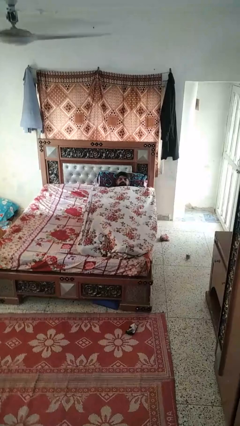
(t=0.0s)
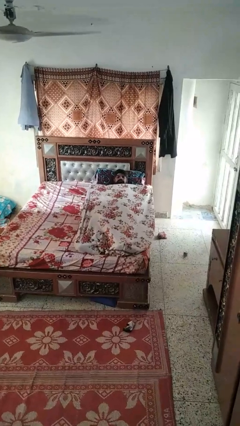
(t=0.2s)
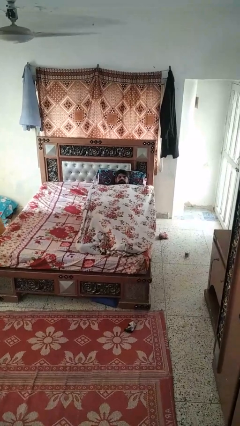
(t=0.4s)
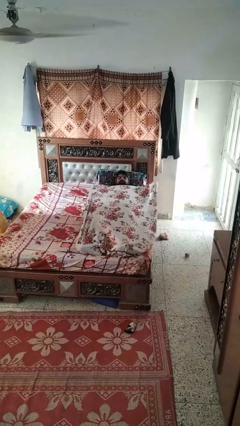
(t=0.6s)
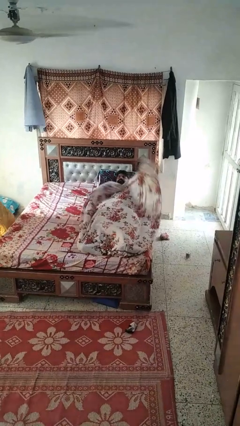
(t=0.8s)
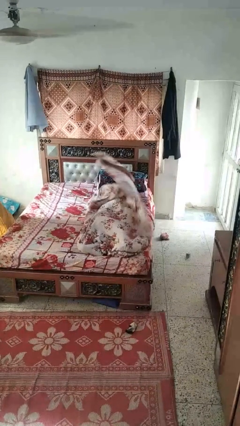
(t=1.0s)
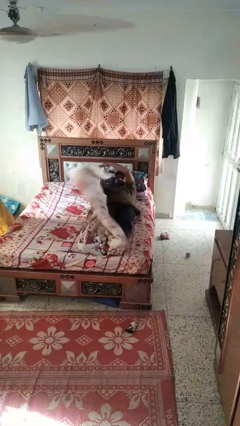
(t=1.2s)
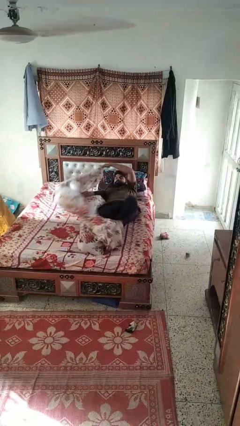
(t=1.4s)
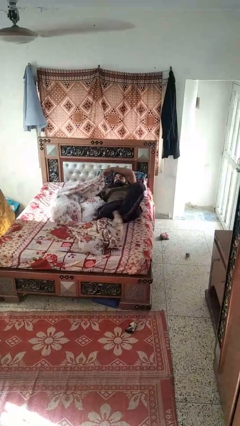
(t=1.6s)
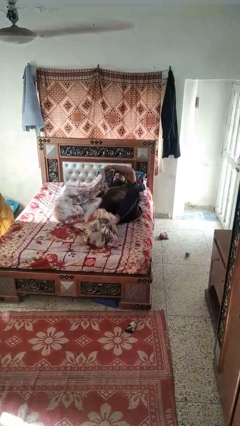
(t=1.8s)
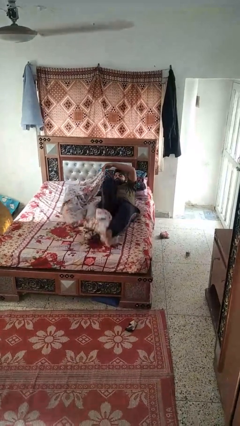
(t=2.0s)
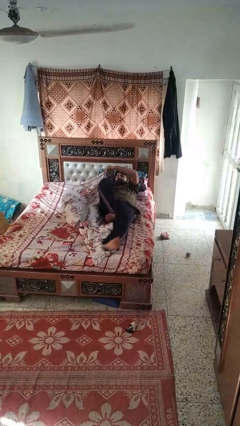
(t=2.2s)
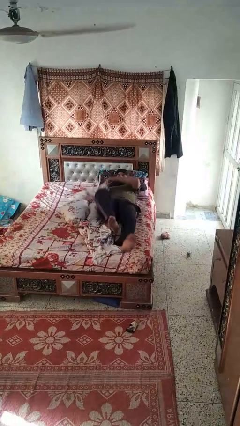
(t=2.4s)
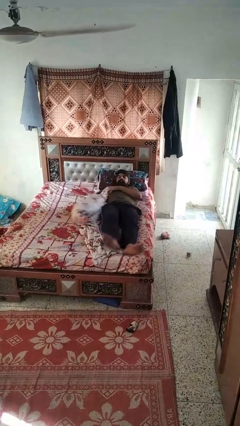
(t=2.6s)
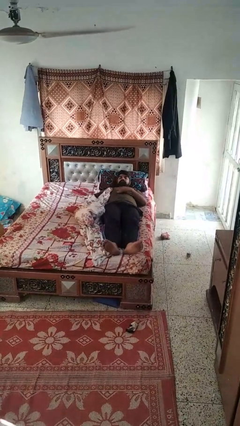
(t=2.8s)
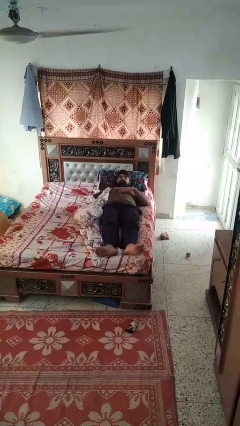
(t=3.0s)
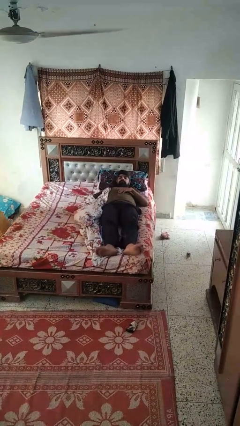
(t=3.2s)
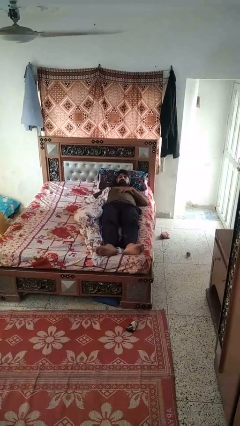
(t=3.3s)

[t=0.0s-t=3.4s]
person uncovers with bedsheets

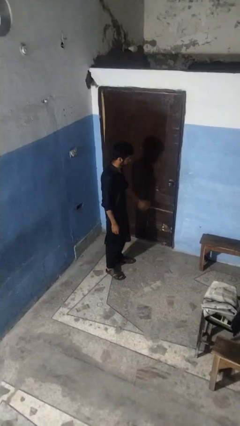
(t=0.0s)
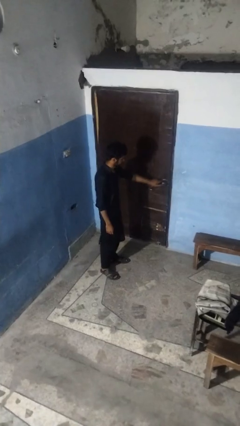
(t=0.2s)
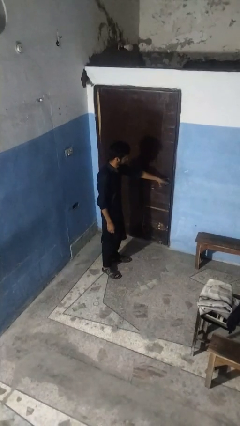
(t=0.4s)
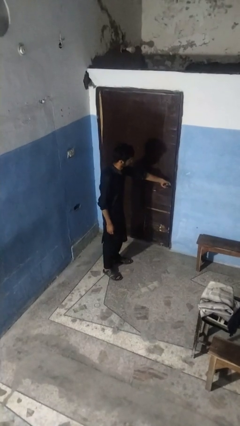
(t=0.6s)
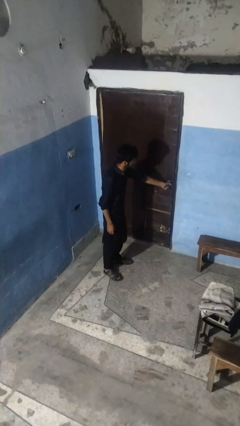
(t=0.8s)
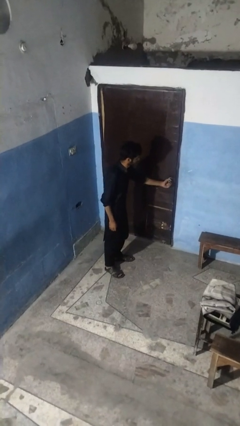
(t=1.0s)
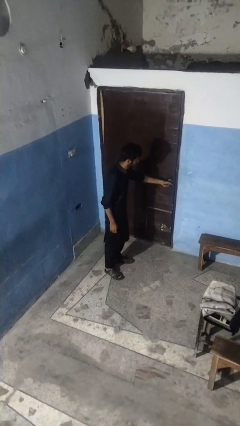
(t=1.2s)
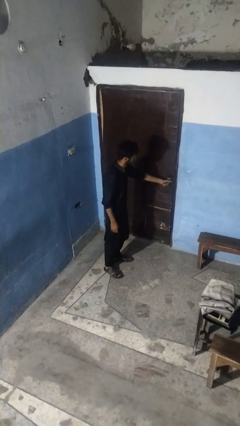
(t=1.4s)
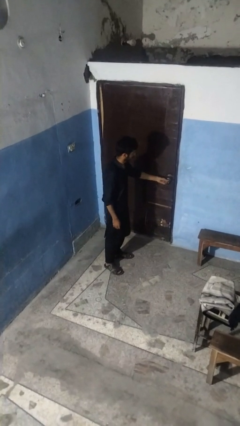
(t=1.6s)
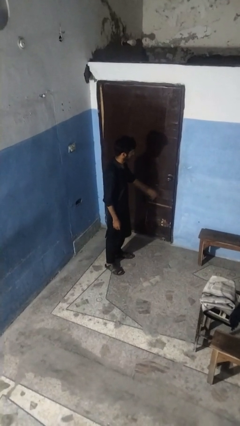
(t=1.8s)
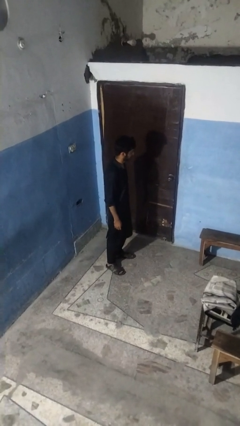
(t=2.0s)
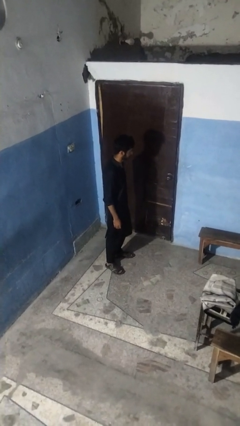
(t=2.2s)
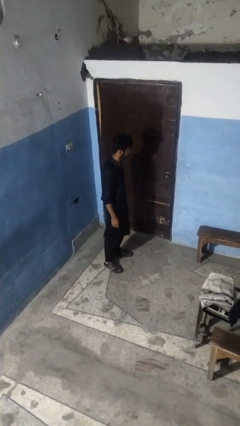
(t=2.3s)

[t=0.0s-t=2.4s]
person unlocks door with keys

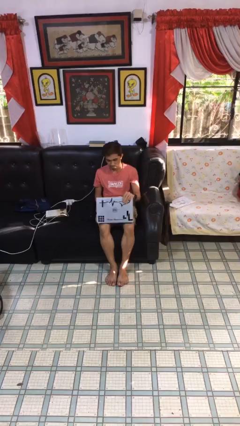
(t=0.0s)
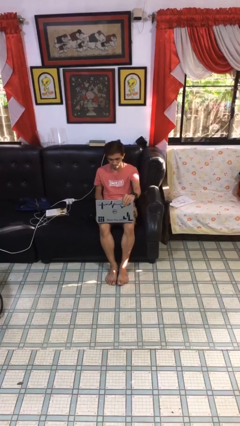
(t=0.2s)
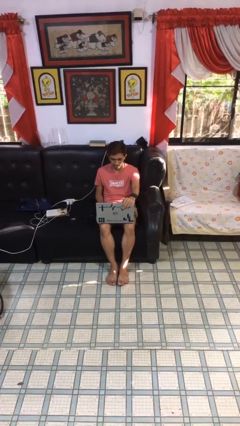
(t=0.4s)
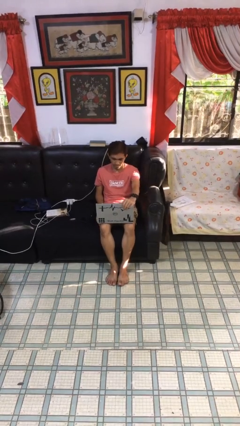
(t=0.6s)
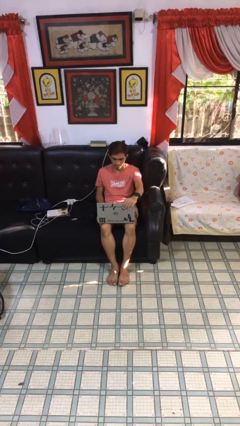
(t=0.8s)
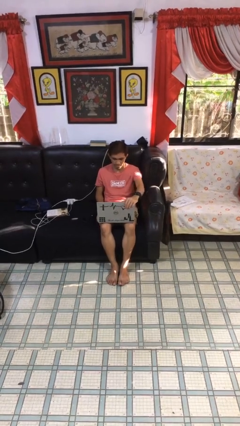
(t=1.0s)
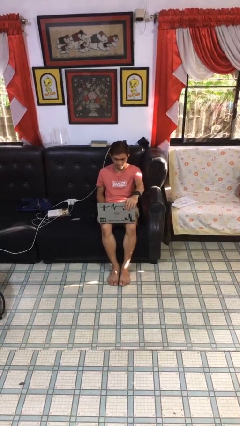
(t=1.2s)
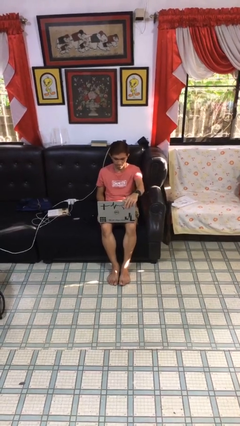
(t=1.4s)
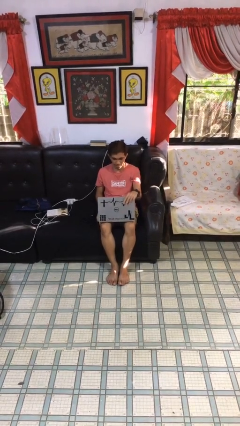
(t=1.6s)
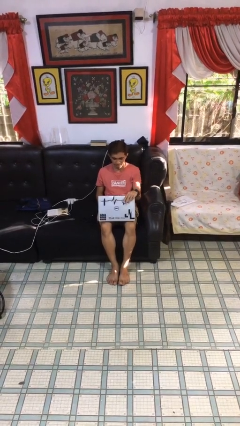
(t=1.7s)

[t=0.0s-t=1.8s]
person interacts with laptop

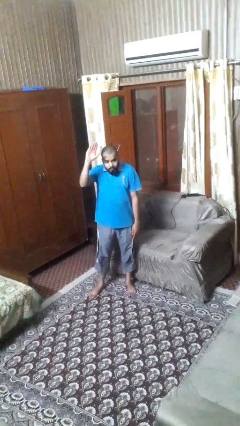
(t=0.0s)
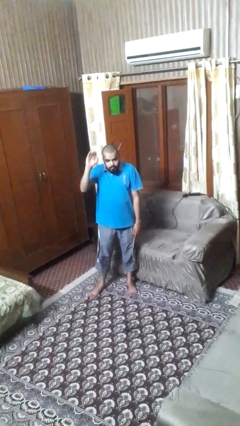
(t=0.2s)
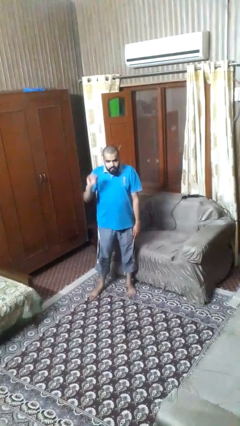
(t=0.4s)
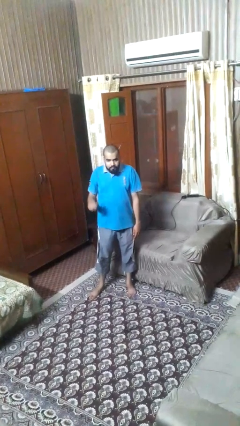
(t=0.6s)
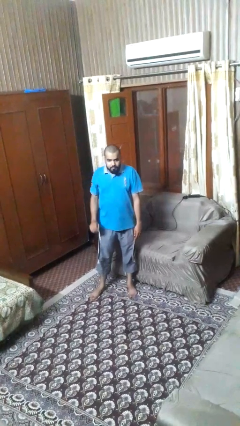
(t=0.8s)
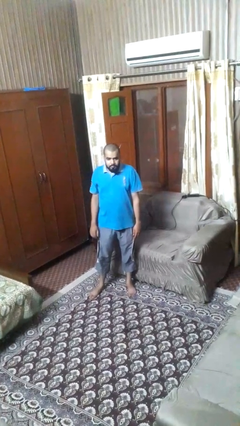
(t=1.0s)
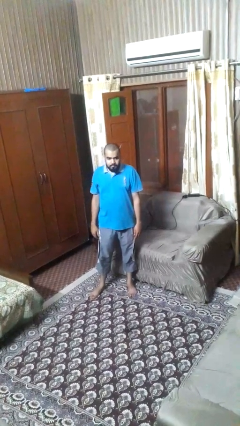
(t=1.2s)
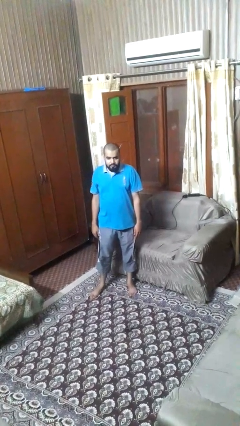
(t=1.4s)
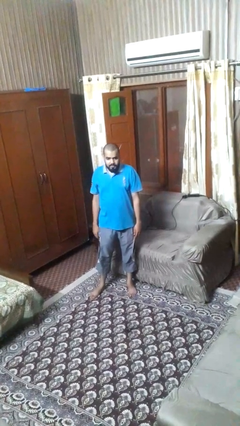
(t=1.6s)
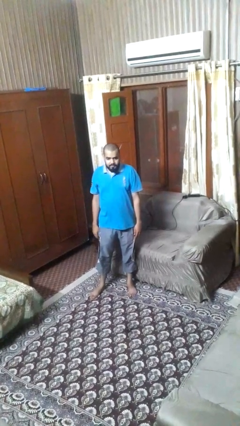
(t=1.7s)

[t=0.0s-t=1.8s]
person gestures swipe up

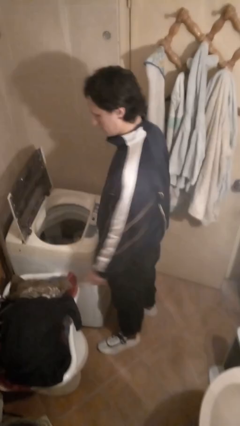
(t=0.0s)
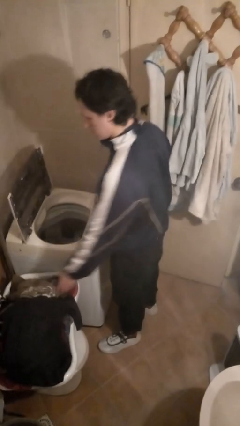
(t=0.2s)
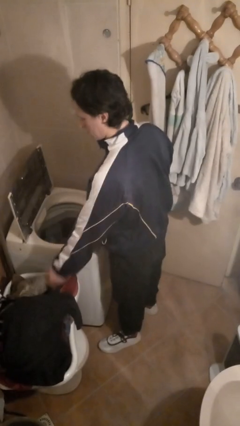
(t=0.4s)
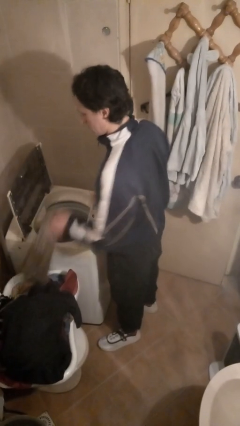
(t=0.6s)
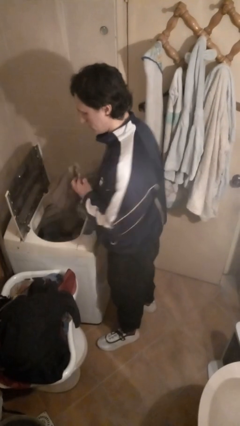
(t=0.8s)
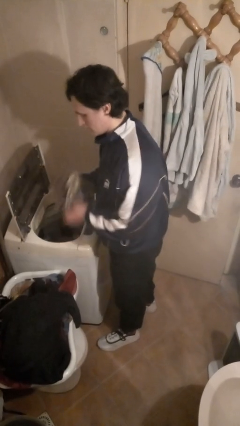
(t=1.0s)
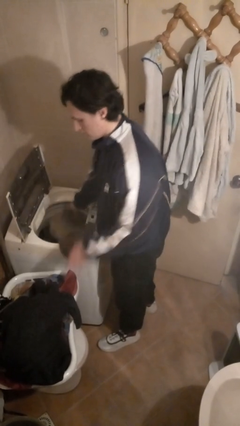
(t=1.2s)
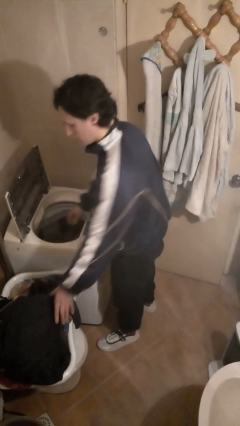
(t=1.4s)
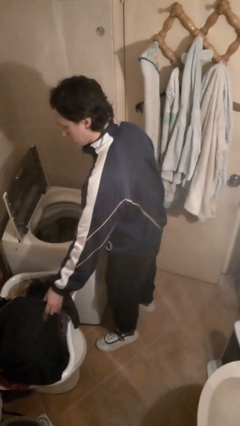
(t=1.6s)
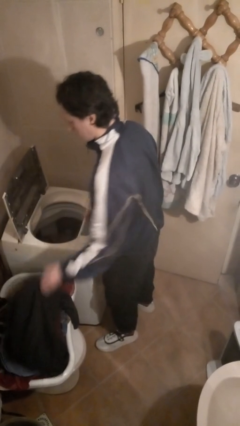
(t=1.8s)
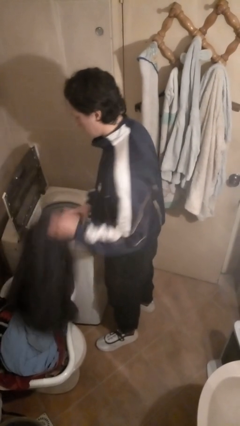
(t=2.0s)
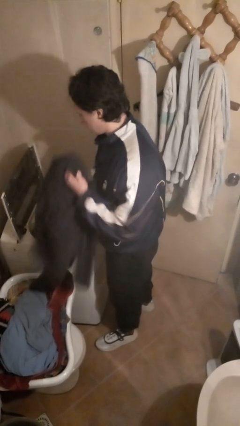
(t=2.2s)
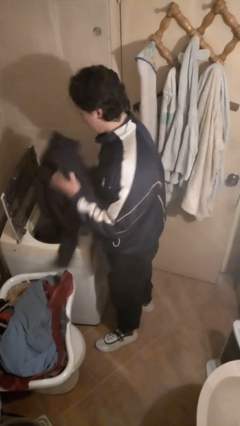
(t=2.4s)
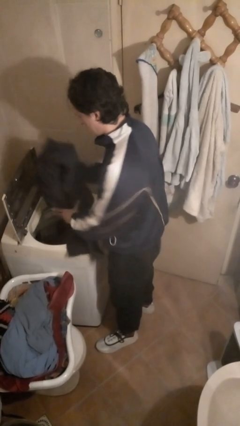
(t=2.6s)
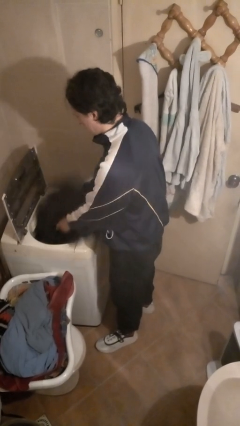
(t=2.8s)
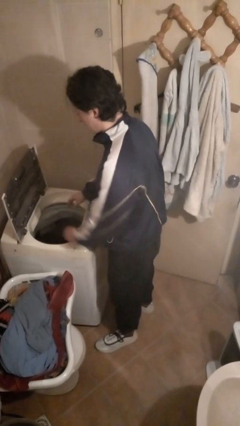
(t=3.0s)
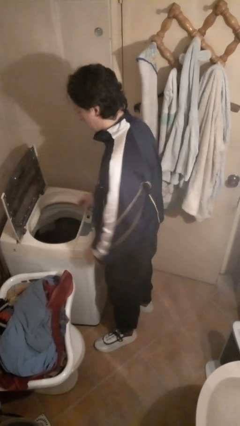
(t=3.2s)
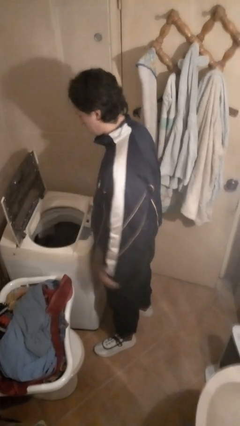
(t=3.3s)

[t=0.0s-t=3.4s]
person loads clotheswasher

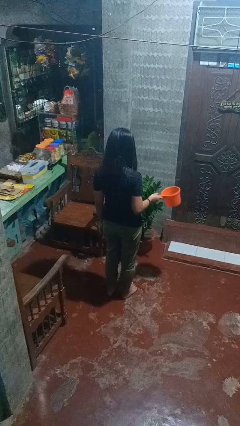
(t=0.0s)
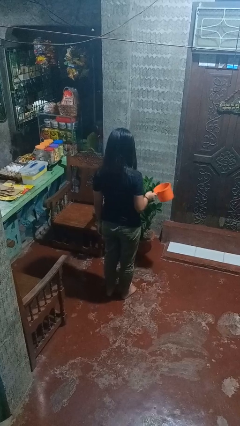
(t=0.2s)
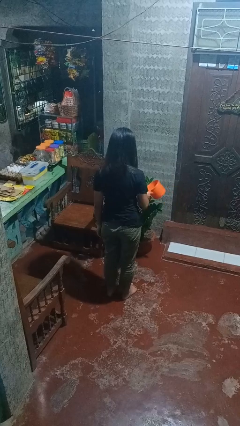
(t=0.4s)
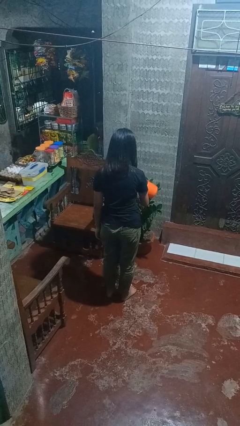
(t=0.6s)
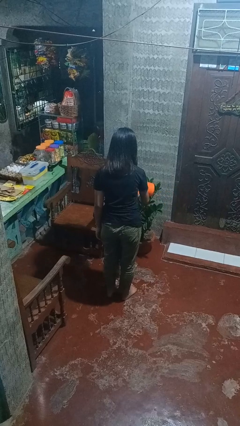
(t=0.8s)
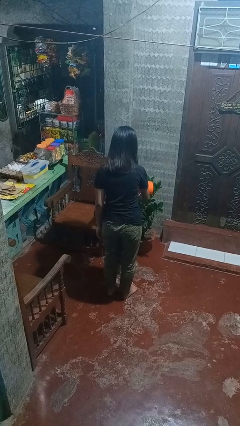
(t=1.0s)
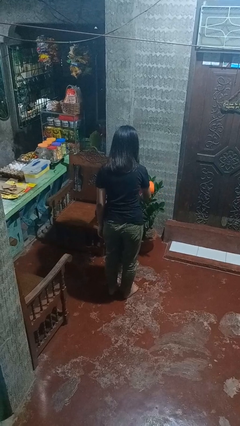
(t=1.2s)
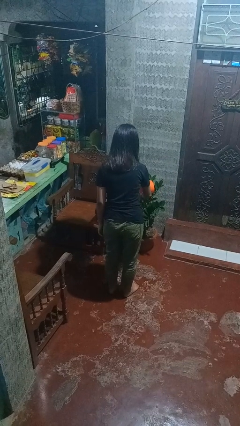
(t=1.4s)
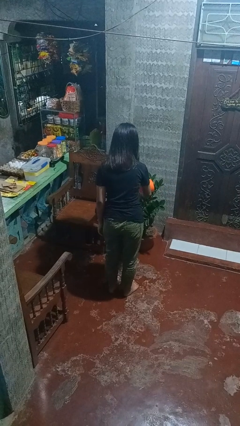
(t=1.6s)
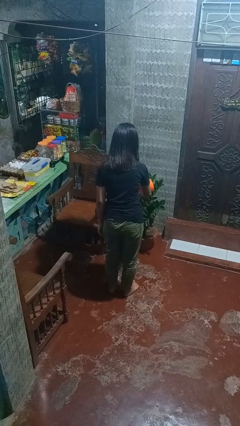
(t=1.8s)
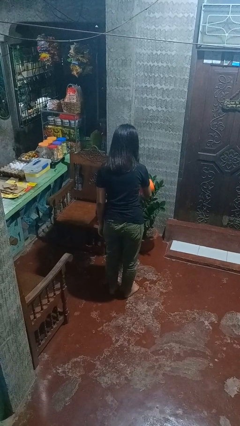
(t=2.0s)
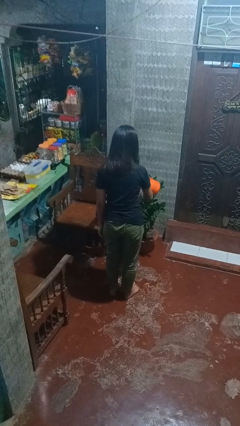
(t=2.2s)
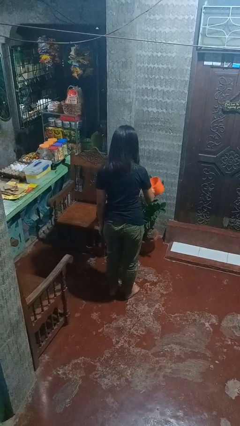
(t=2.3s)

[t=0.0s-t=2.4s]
person waters houseplant

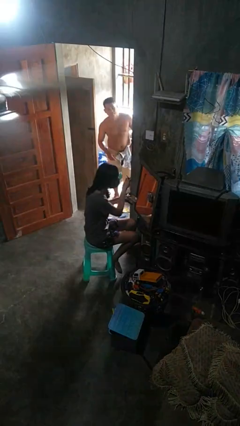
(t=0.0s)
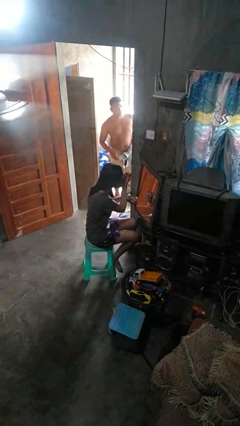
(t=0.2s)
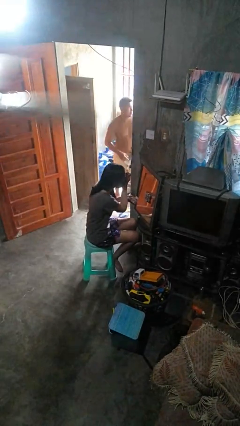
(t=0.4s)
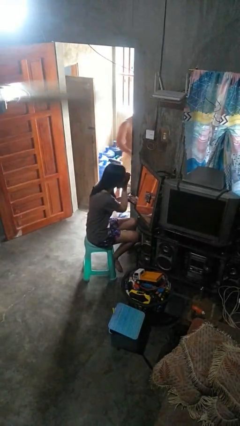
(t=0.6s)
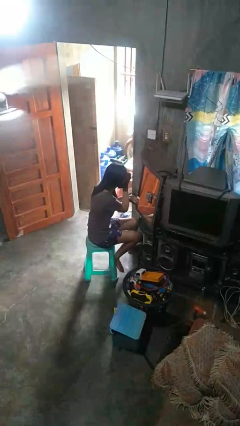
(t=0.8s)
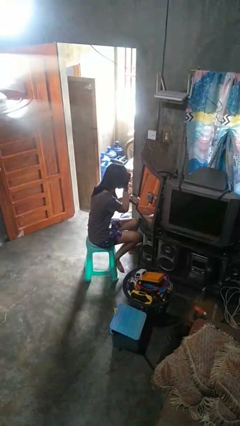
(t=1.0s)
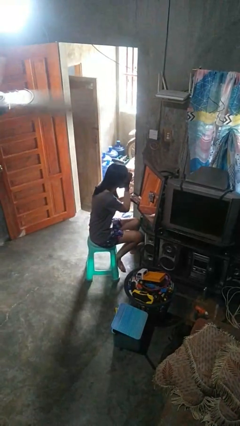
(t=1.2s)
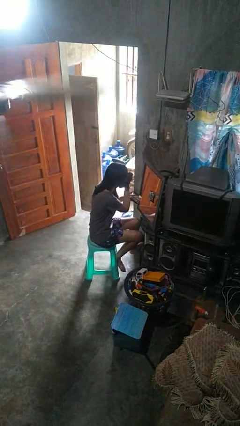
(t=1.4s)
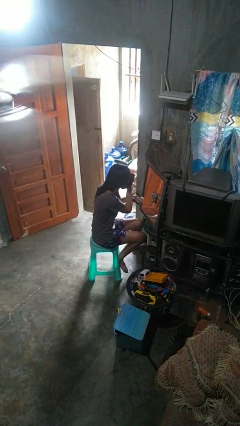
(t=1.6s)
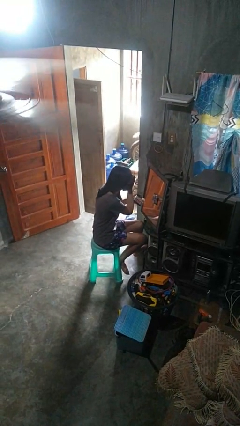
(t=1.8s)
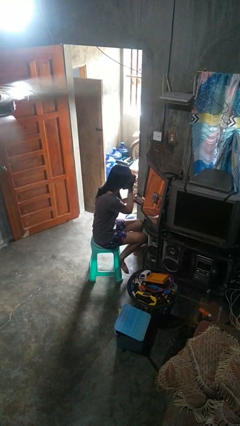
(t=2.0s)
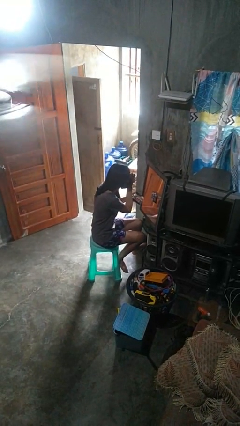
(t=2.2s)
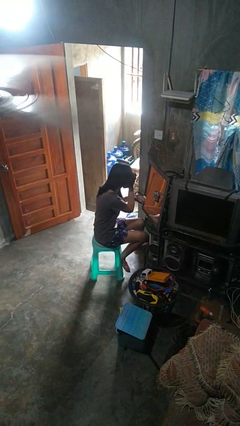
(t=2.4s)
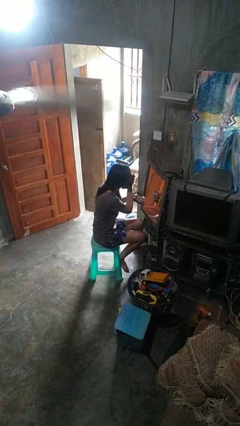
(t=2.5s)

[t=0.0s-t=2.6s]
person applies eye makeup
